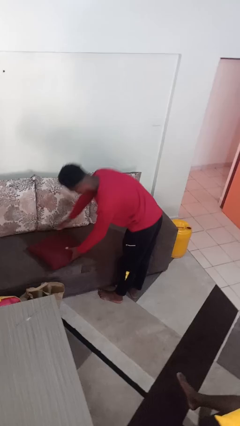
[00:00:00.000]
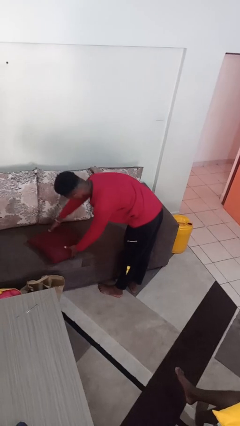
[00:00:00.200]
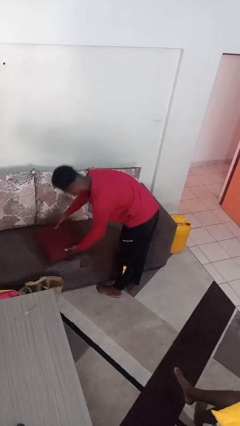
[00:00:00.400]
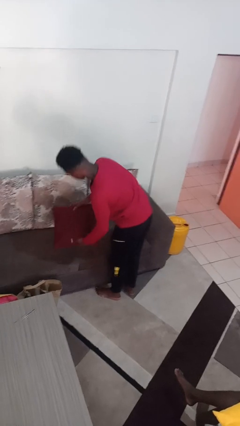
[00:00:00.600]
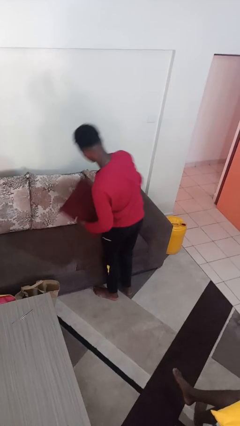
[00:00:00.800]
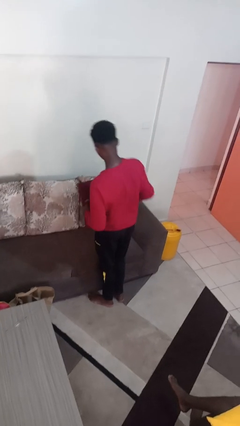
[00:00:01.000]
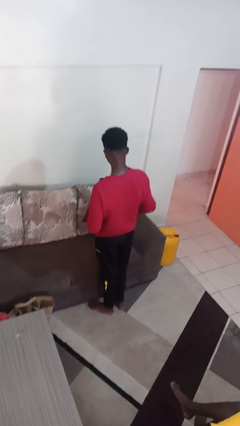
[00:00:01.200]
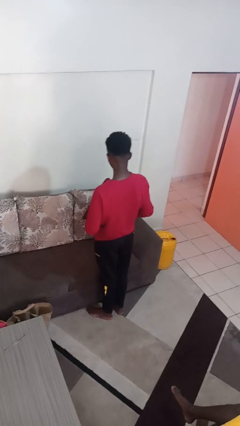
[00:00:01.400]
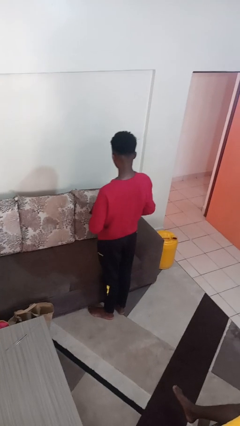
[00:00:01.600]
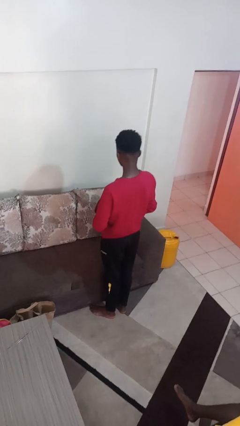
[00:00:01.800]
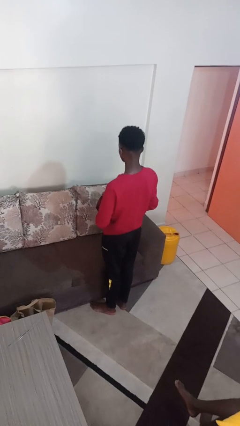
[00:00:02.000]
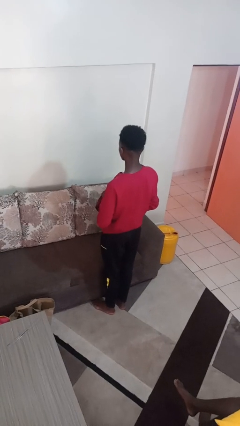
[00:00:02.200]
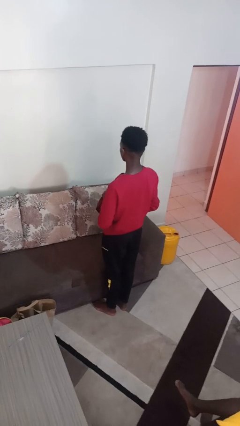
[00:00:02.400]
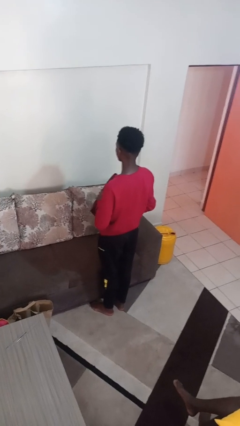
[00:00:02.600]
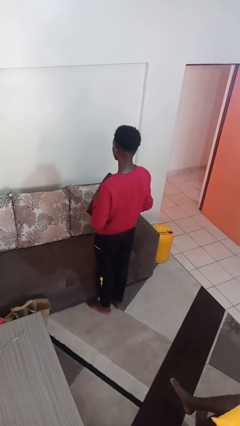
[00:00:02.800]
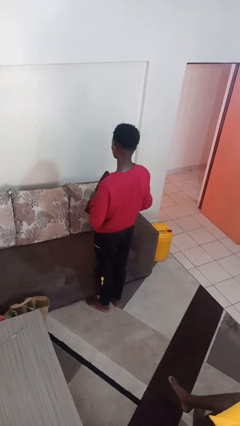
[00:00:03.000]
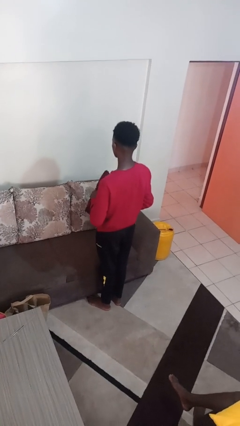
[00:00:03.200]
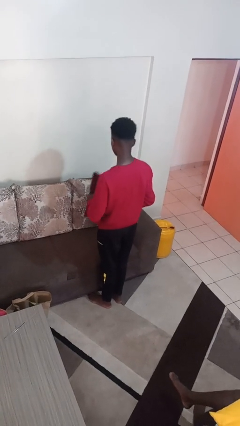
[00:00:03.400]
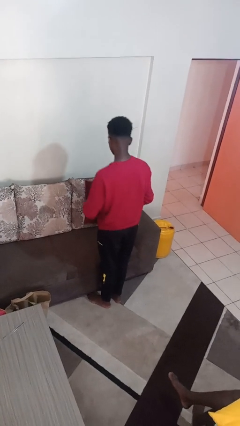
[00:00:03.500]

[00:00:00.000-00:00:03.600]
person picks up object from couch

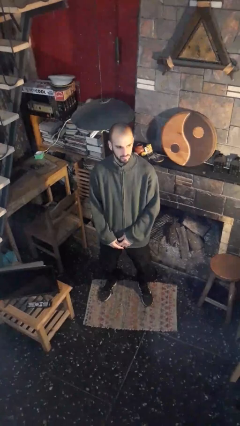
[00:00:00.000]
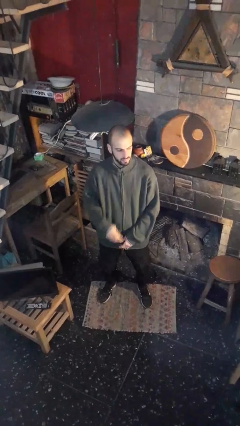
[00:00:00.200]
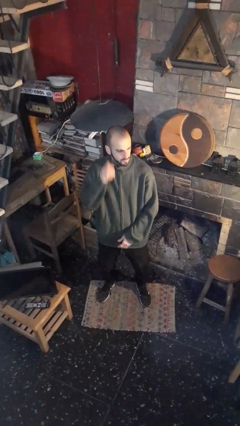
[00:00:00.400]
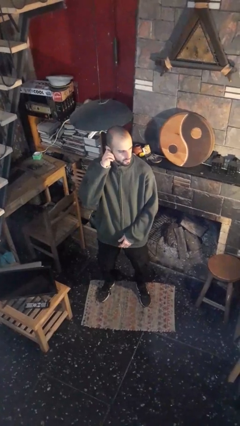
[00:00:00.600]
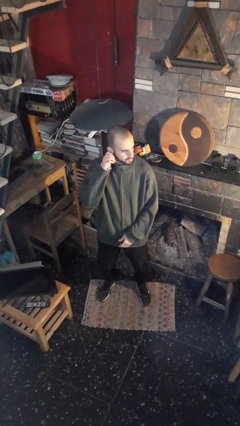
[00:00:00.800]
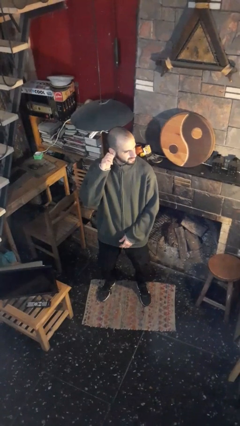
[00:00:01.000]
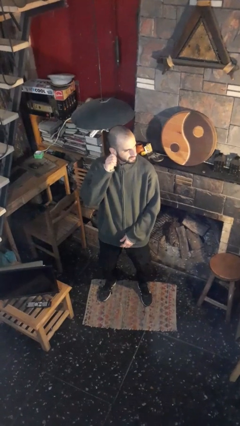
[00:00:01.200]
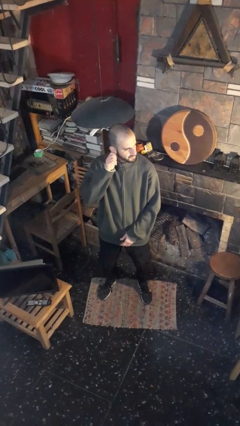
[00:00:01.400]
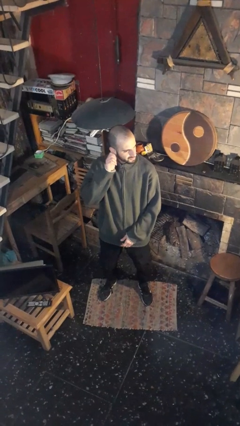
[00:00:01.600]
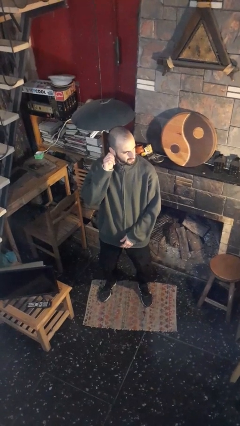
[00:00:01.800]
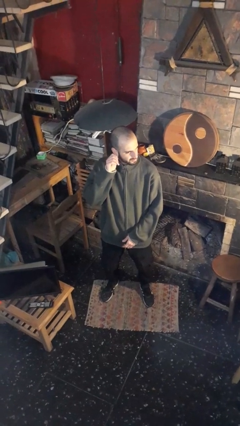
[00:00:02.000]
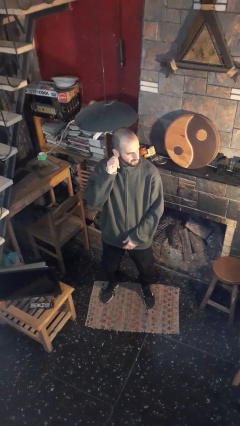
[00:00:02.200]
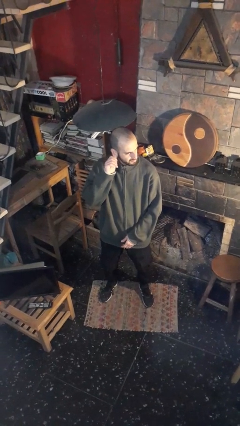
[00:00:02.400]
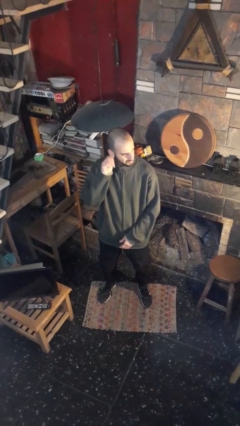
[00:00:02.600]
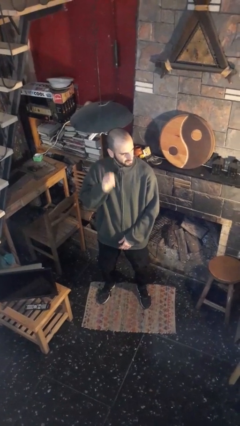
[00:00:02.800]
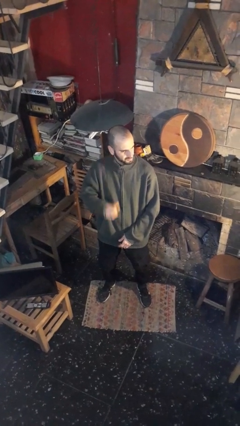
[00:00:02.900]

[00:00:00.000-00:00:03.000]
person touches earlobe

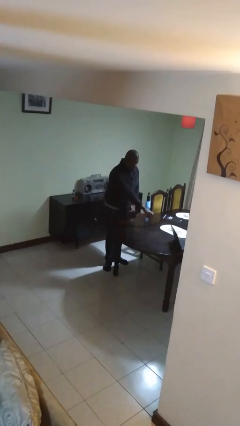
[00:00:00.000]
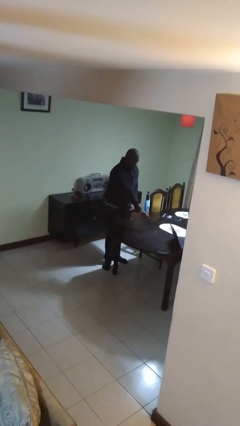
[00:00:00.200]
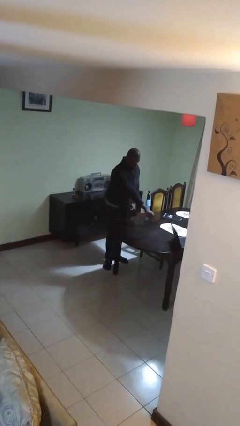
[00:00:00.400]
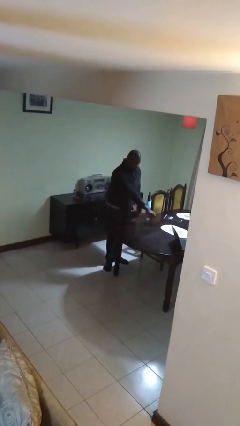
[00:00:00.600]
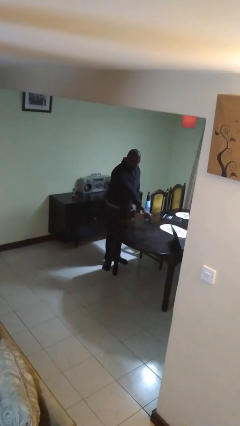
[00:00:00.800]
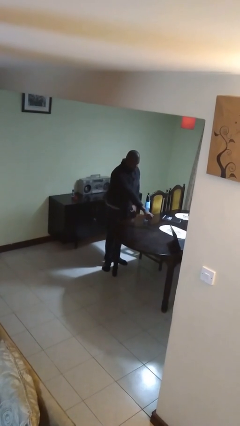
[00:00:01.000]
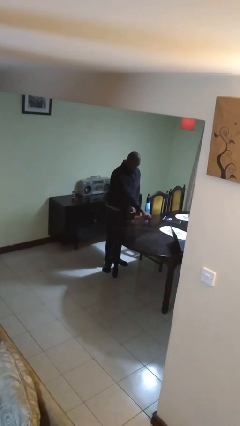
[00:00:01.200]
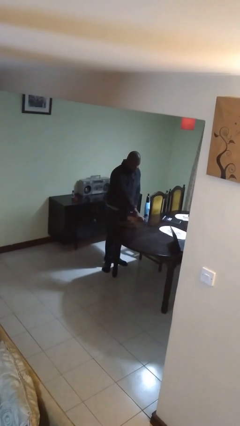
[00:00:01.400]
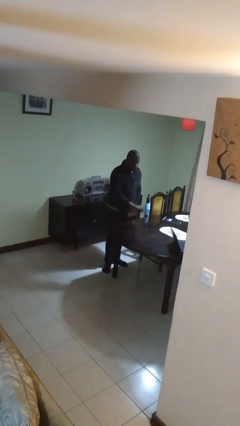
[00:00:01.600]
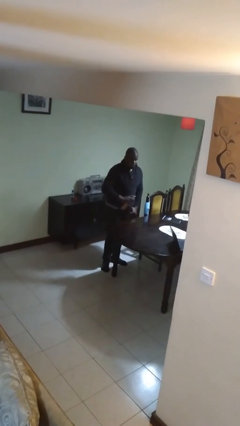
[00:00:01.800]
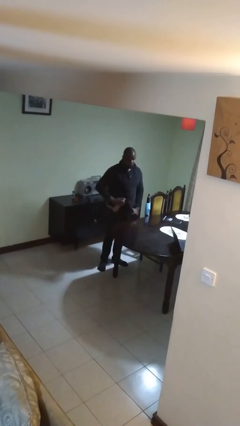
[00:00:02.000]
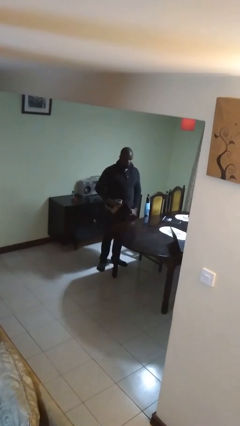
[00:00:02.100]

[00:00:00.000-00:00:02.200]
person sprays from bottle

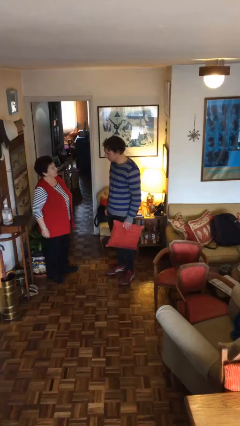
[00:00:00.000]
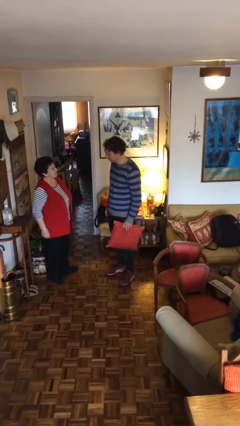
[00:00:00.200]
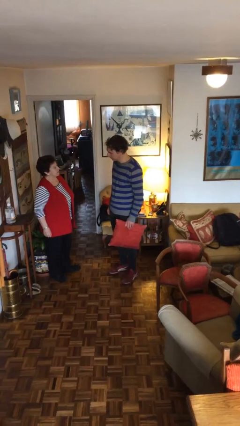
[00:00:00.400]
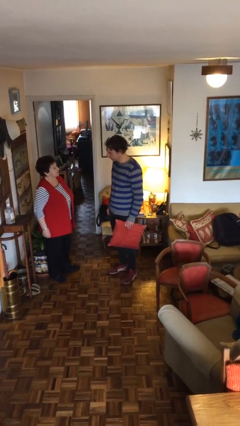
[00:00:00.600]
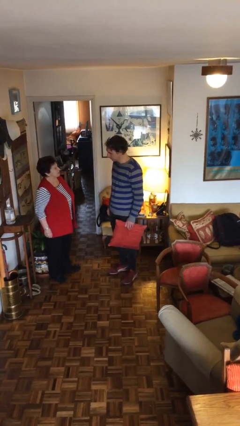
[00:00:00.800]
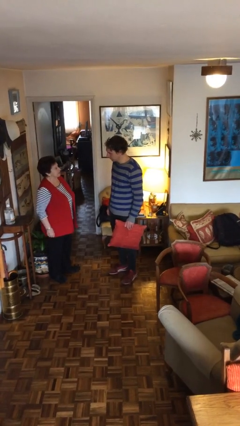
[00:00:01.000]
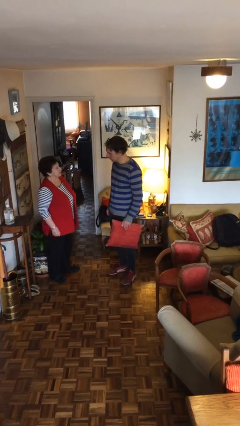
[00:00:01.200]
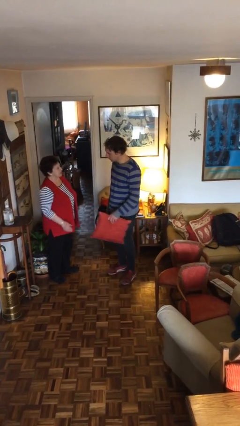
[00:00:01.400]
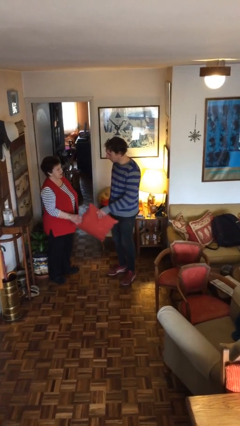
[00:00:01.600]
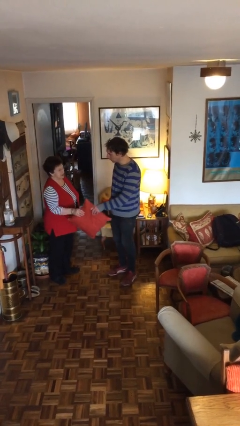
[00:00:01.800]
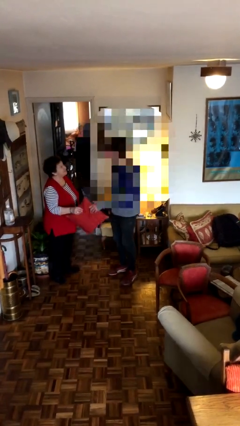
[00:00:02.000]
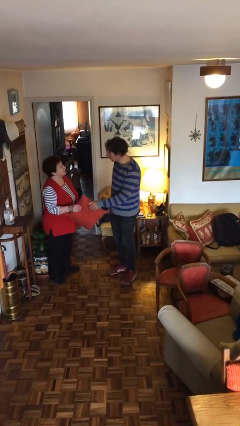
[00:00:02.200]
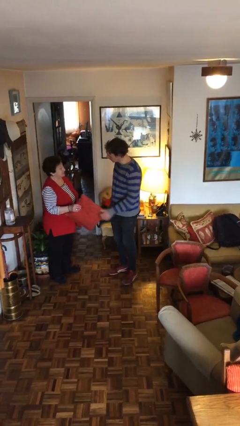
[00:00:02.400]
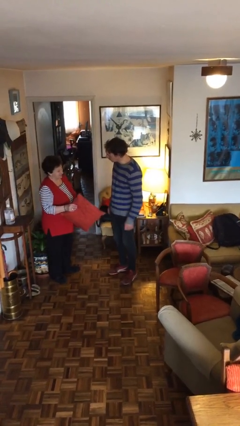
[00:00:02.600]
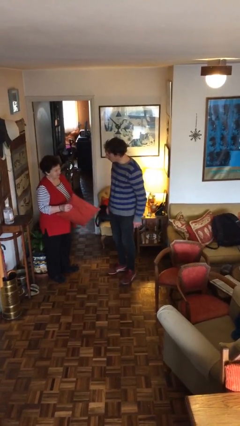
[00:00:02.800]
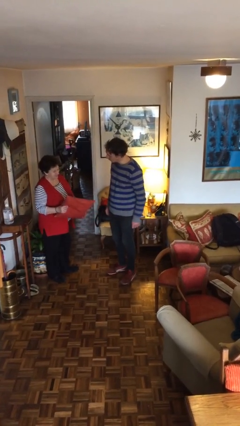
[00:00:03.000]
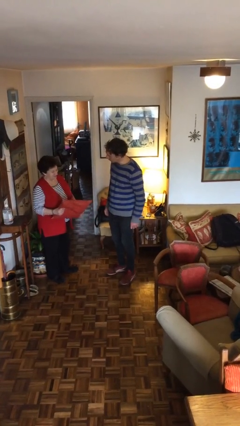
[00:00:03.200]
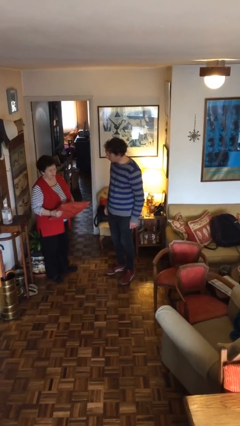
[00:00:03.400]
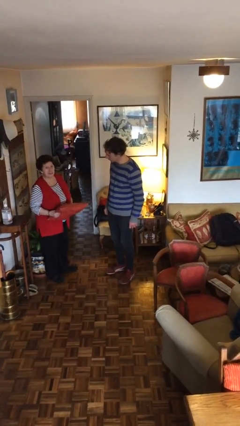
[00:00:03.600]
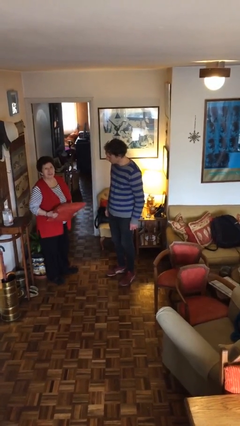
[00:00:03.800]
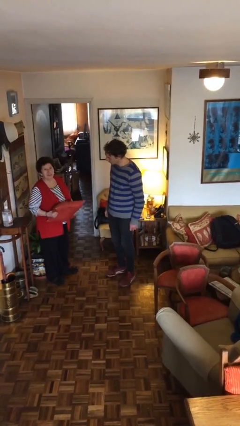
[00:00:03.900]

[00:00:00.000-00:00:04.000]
person transfers object to person

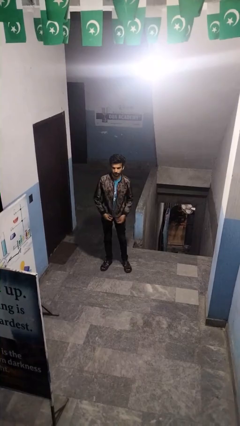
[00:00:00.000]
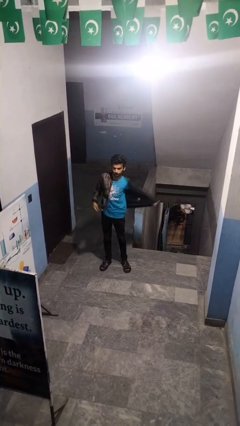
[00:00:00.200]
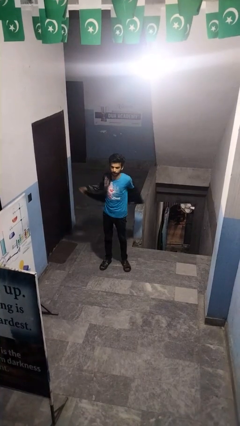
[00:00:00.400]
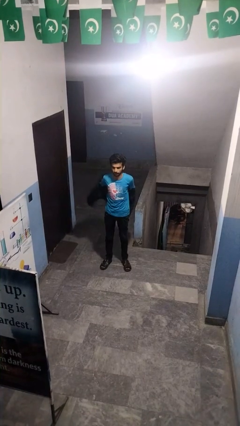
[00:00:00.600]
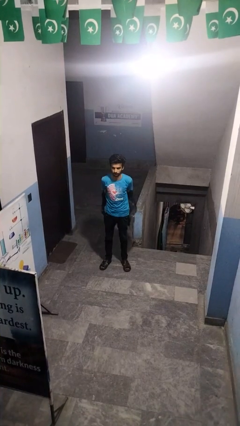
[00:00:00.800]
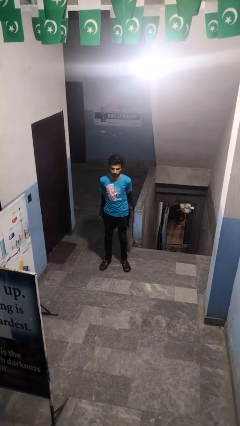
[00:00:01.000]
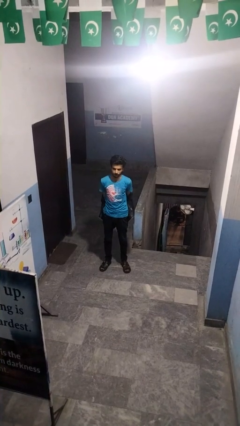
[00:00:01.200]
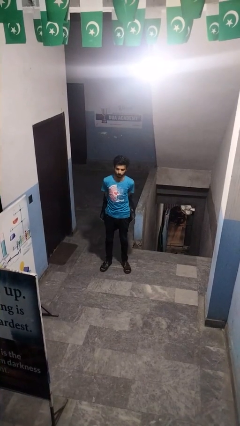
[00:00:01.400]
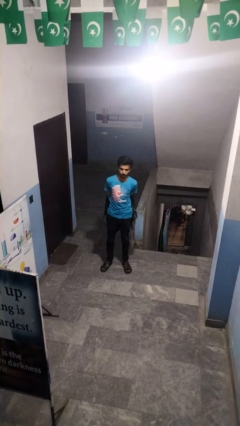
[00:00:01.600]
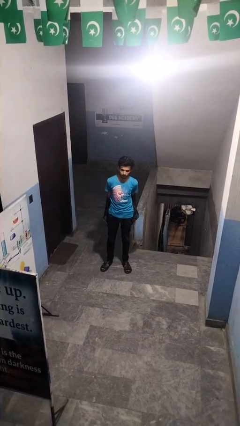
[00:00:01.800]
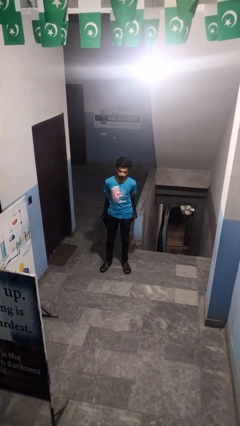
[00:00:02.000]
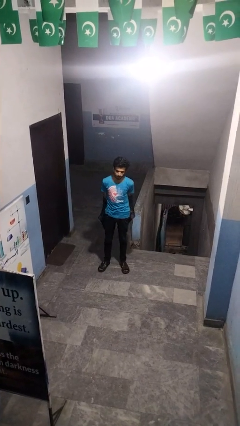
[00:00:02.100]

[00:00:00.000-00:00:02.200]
person takes off jacket

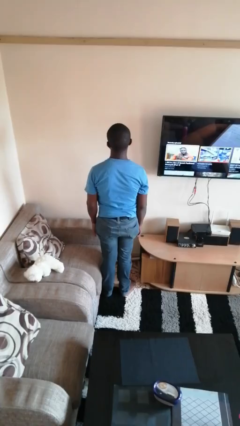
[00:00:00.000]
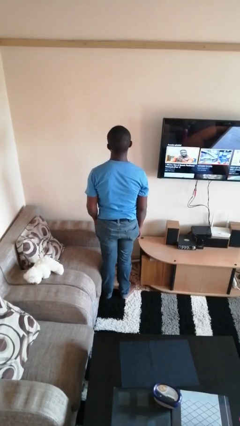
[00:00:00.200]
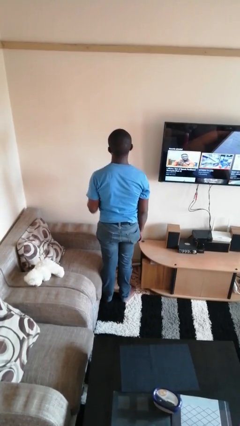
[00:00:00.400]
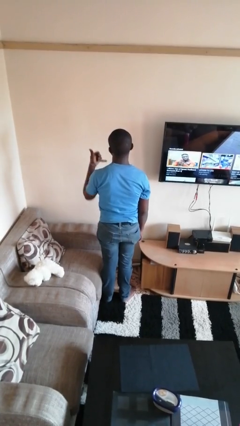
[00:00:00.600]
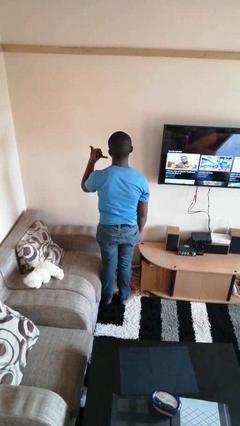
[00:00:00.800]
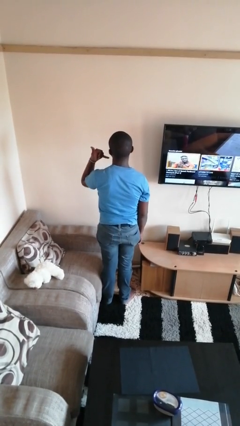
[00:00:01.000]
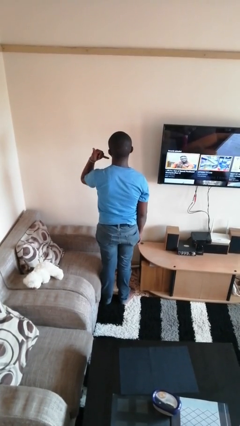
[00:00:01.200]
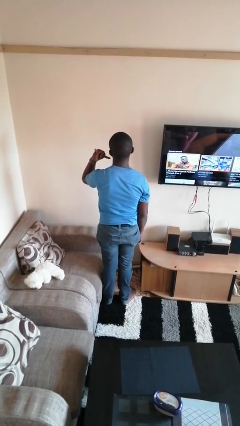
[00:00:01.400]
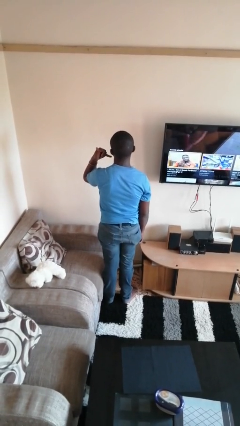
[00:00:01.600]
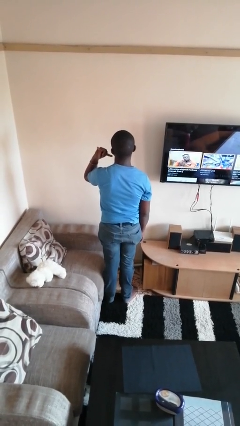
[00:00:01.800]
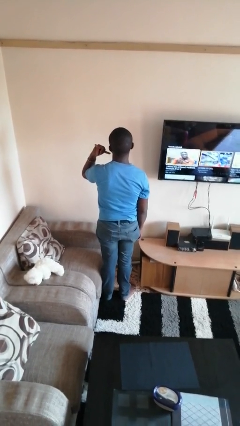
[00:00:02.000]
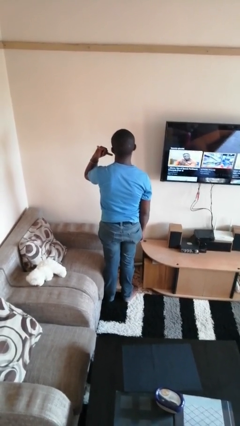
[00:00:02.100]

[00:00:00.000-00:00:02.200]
person gestures call me
